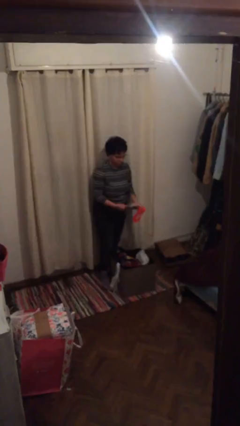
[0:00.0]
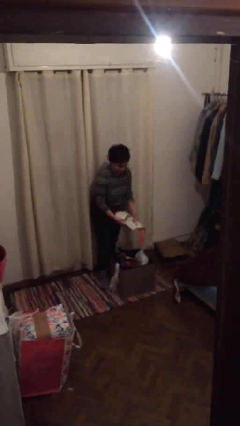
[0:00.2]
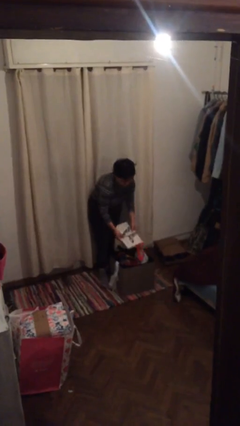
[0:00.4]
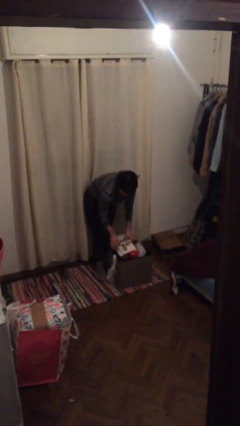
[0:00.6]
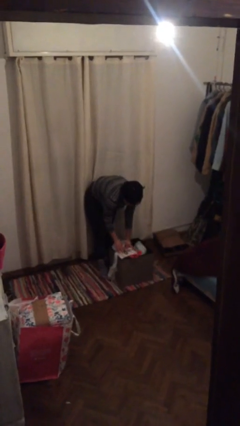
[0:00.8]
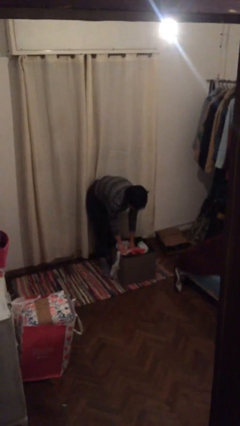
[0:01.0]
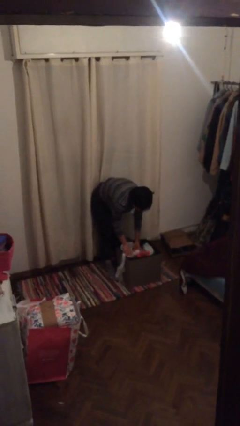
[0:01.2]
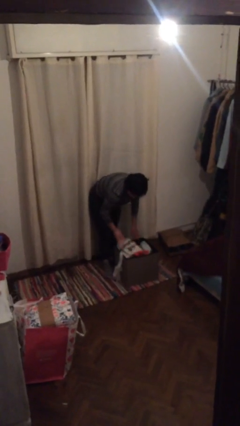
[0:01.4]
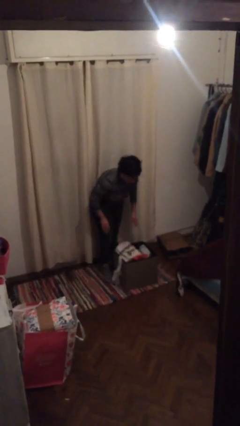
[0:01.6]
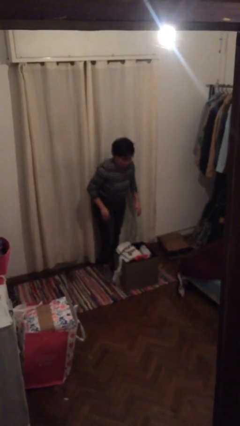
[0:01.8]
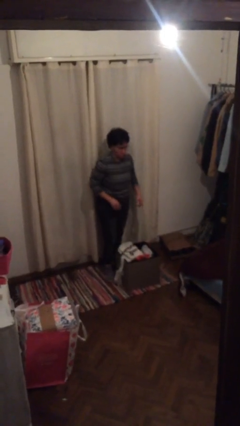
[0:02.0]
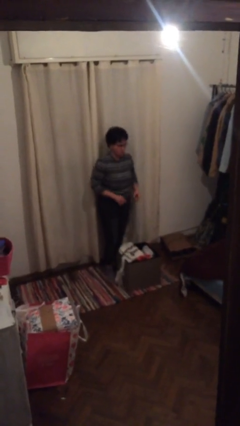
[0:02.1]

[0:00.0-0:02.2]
person puts object into basket

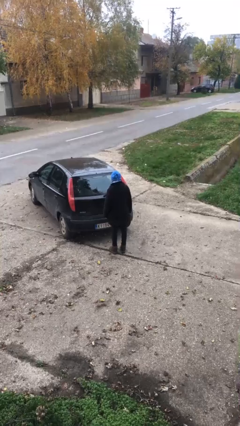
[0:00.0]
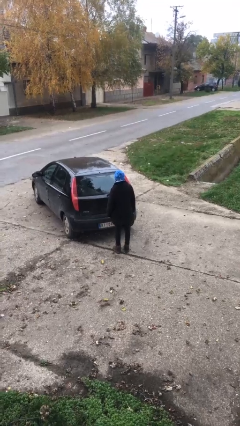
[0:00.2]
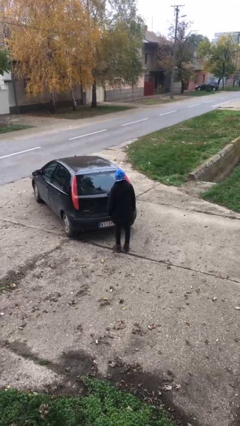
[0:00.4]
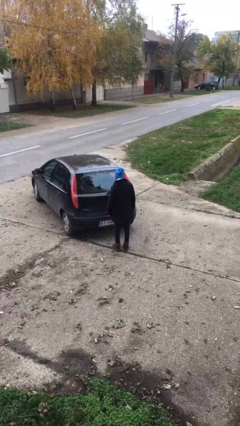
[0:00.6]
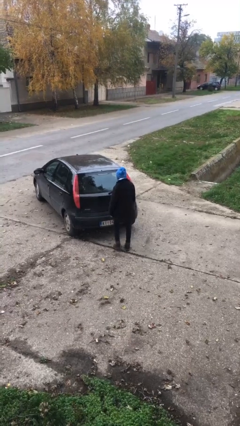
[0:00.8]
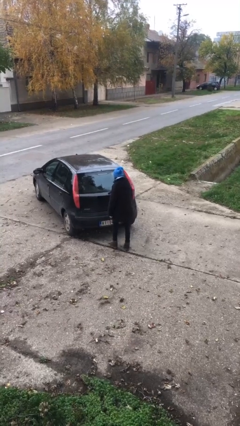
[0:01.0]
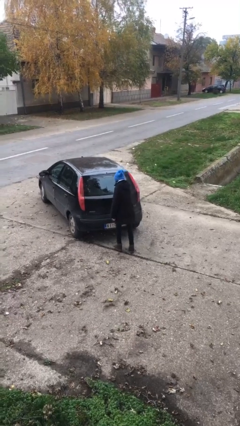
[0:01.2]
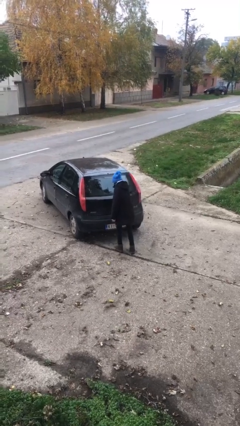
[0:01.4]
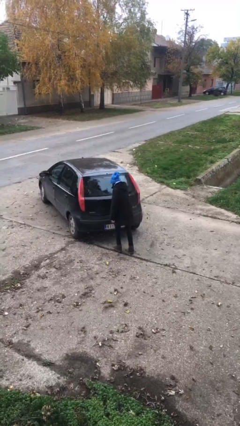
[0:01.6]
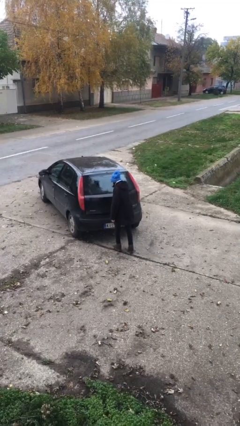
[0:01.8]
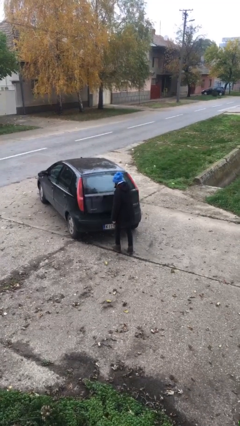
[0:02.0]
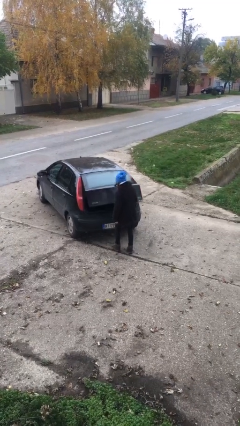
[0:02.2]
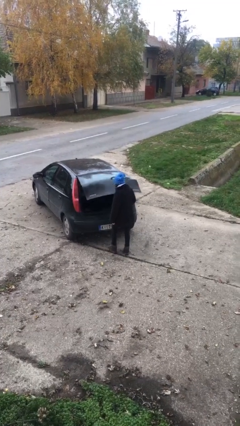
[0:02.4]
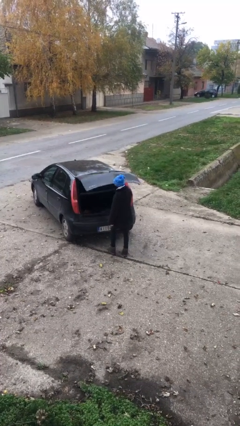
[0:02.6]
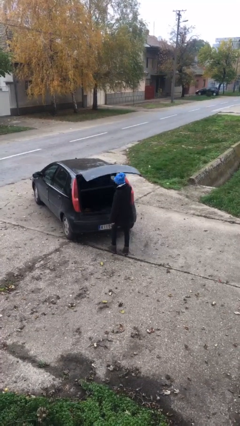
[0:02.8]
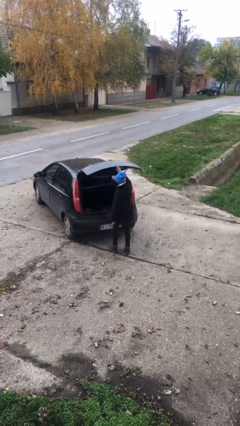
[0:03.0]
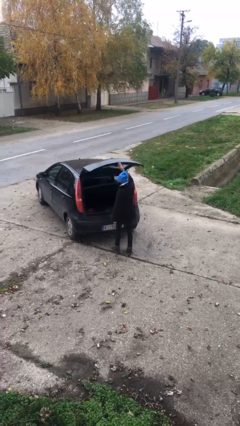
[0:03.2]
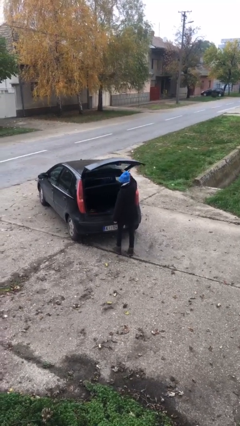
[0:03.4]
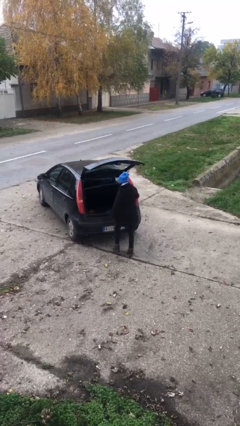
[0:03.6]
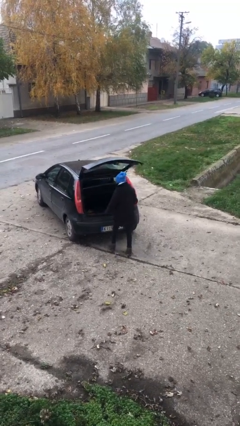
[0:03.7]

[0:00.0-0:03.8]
person opens car trunk

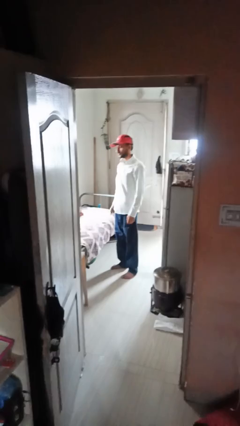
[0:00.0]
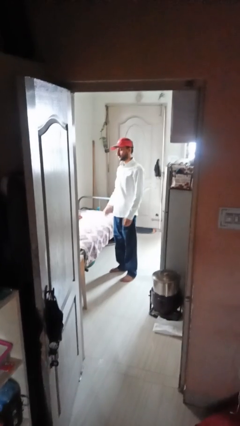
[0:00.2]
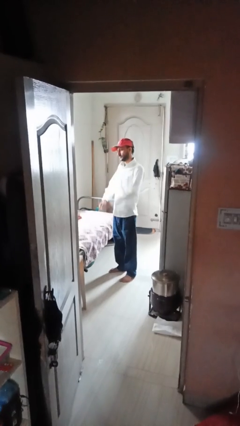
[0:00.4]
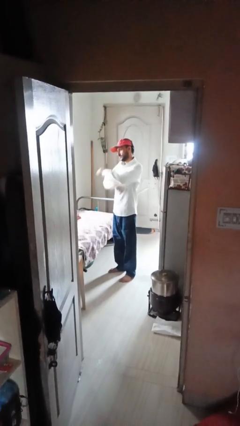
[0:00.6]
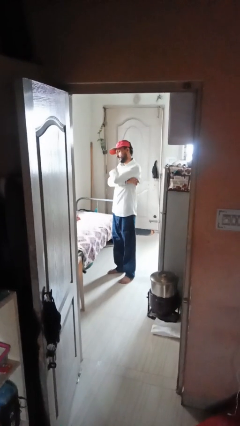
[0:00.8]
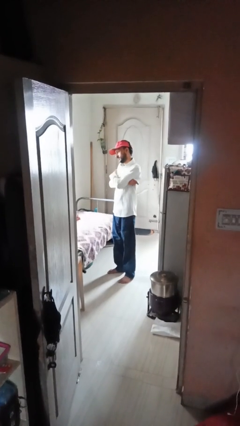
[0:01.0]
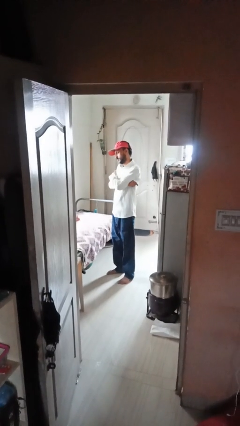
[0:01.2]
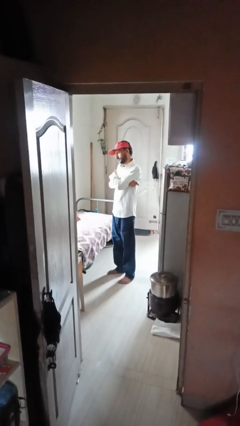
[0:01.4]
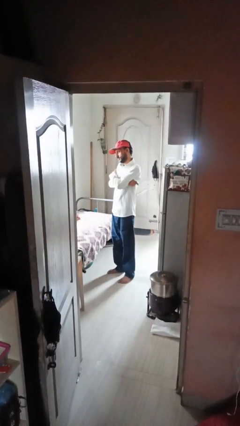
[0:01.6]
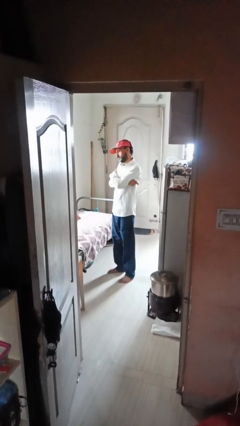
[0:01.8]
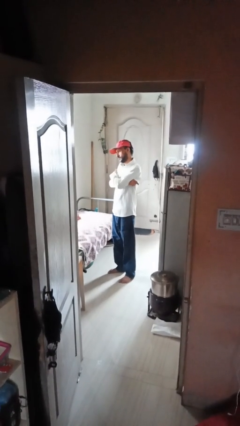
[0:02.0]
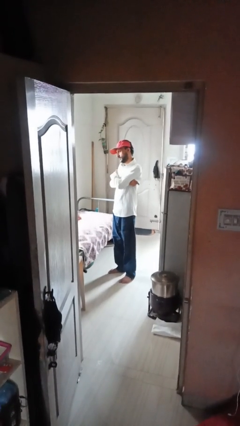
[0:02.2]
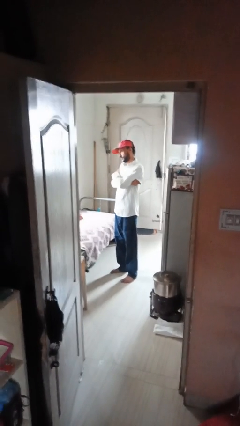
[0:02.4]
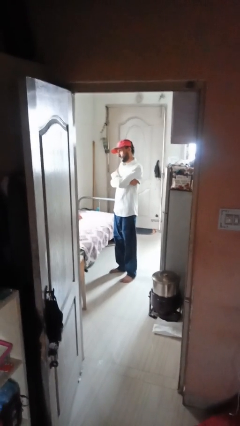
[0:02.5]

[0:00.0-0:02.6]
person crosses arms

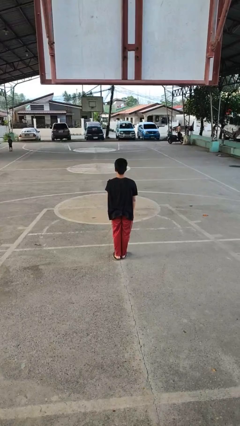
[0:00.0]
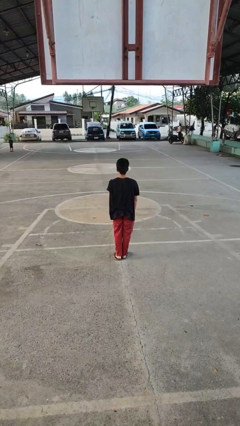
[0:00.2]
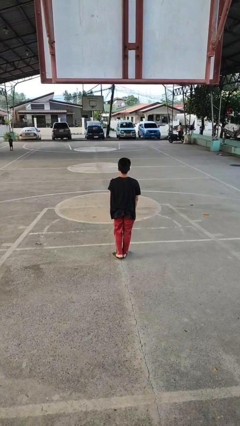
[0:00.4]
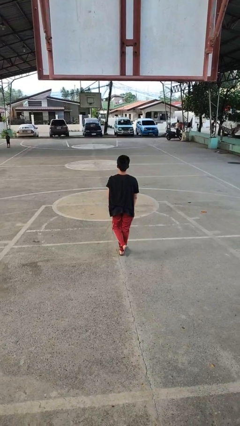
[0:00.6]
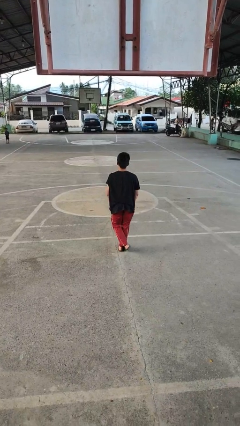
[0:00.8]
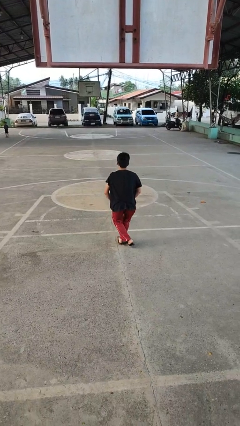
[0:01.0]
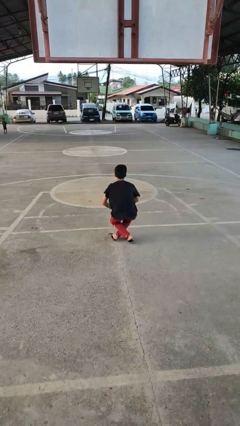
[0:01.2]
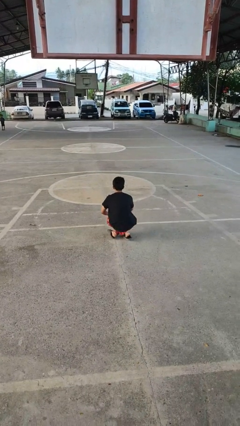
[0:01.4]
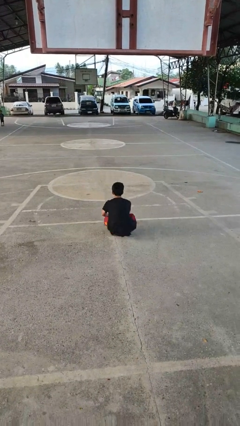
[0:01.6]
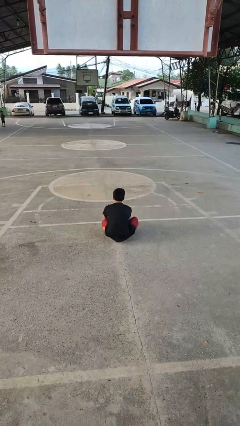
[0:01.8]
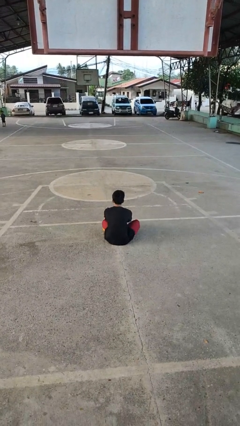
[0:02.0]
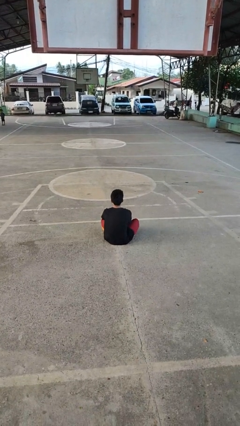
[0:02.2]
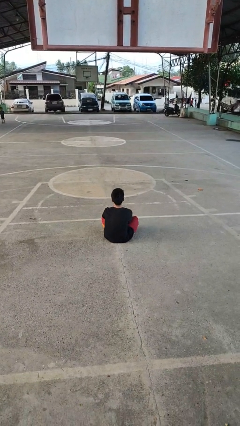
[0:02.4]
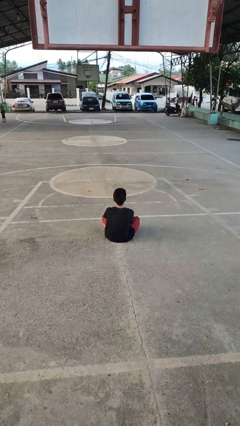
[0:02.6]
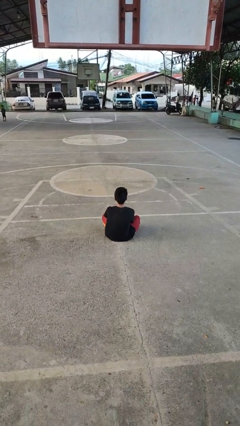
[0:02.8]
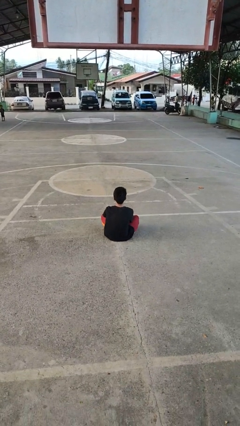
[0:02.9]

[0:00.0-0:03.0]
person sits crisscross

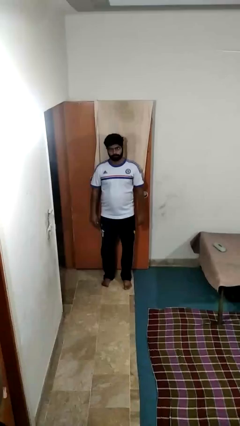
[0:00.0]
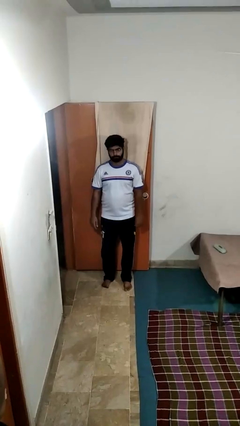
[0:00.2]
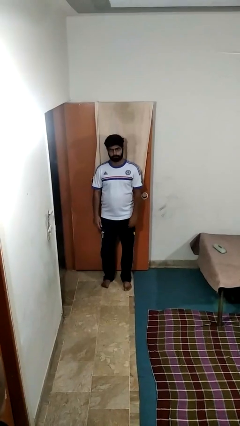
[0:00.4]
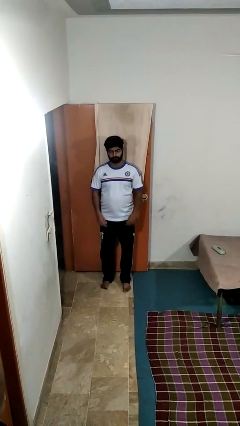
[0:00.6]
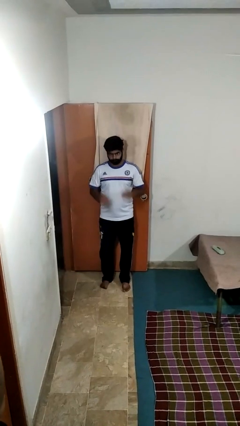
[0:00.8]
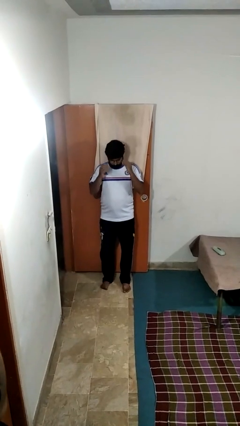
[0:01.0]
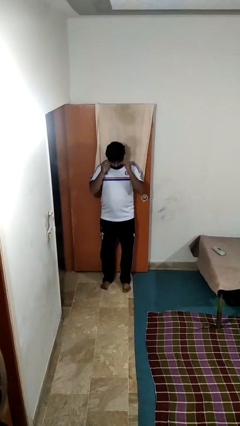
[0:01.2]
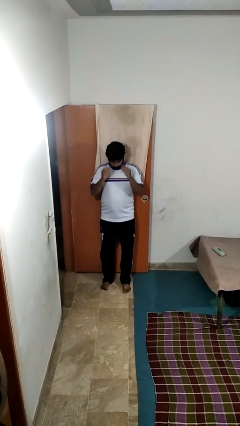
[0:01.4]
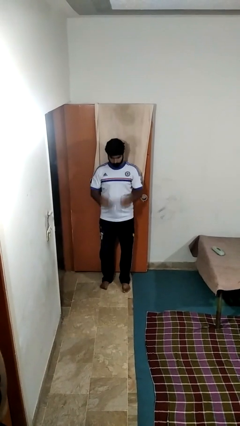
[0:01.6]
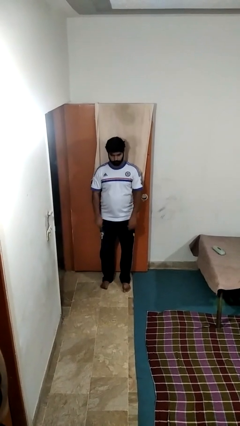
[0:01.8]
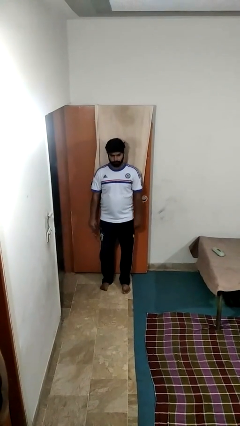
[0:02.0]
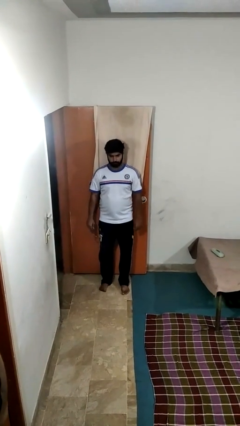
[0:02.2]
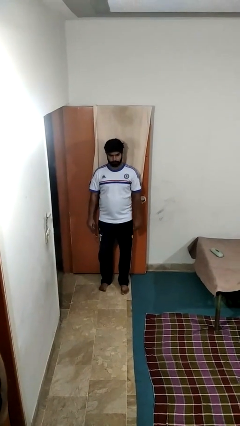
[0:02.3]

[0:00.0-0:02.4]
person takes off glasses

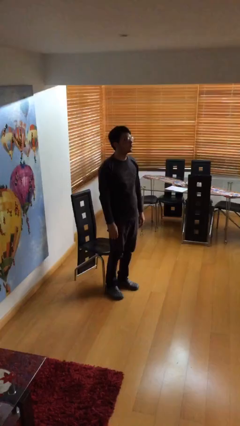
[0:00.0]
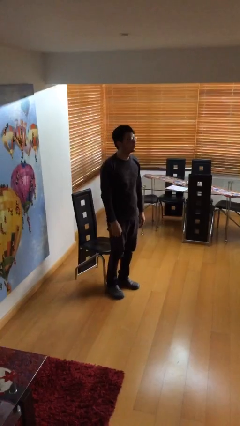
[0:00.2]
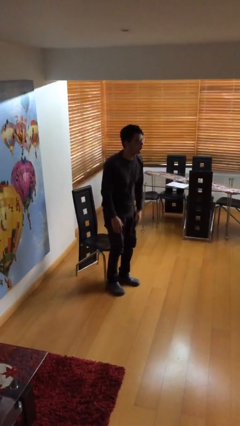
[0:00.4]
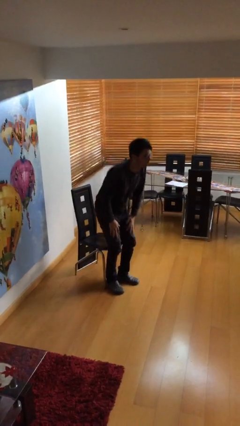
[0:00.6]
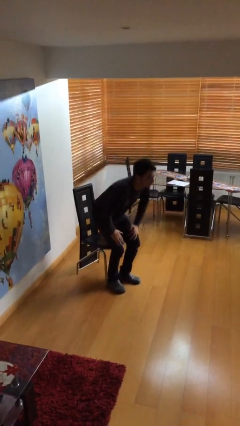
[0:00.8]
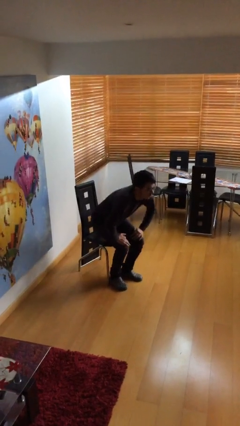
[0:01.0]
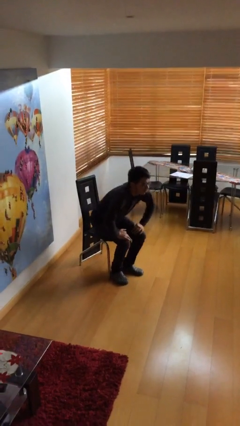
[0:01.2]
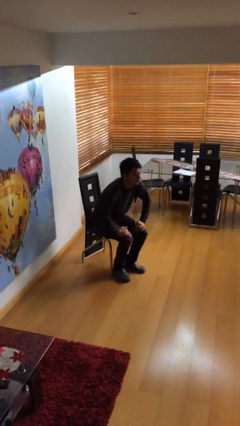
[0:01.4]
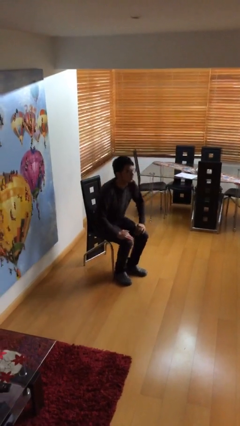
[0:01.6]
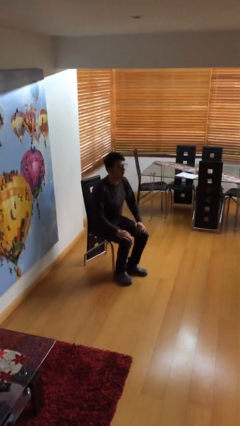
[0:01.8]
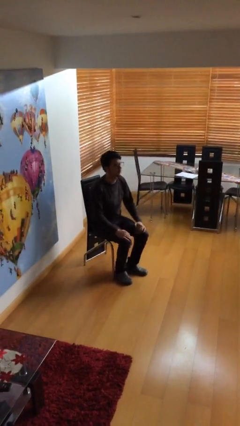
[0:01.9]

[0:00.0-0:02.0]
person sits down

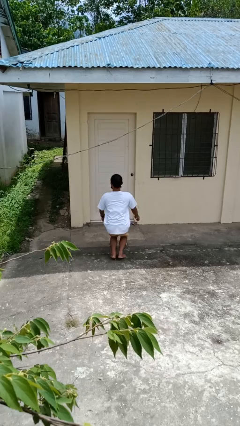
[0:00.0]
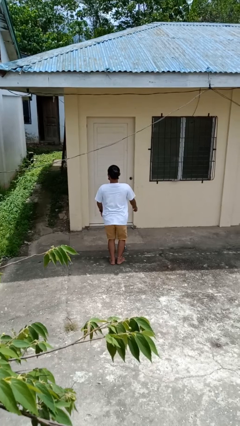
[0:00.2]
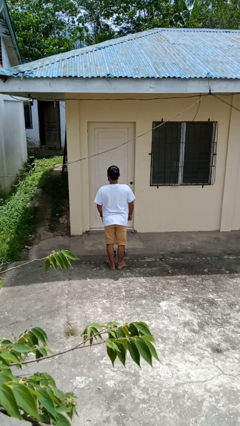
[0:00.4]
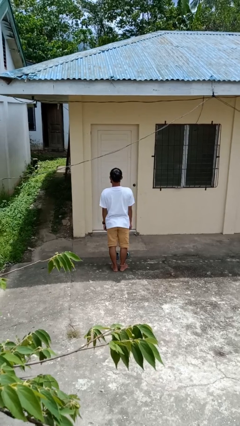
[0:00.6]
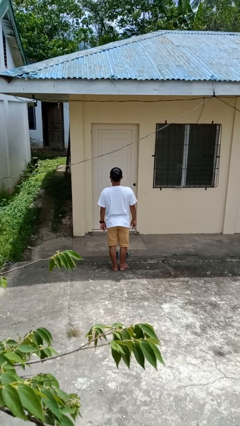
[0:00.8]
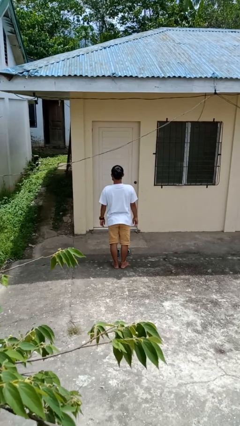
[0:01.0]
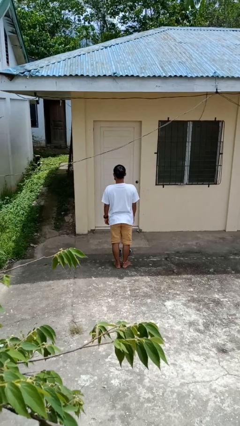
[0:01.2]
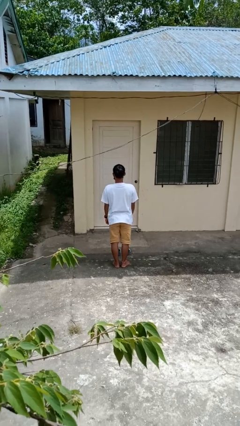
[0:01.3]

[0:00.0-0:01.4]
person stands up from floor
